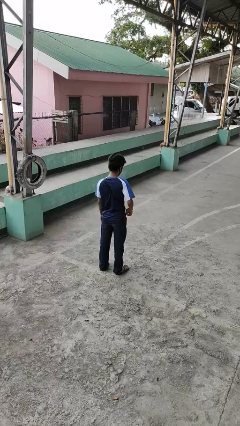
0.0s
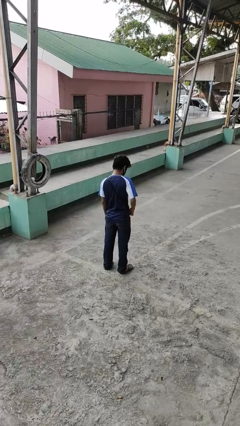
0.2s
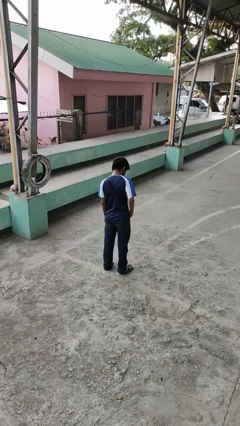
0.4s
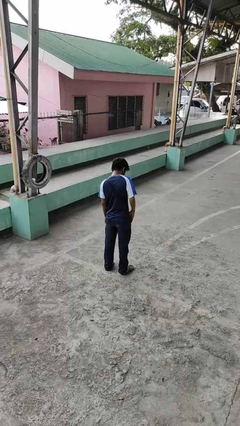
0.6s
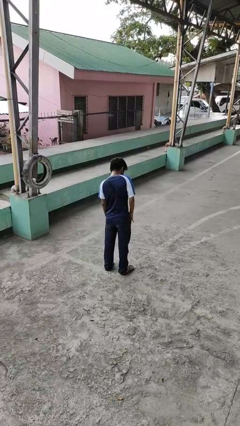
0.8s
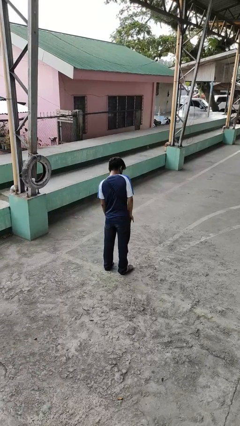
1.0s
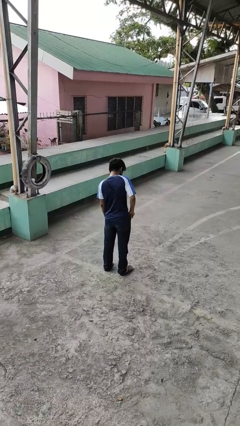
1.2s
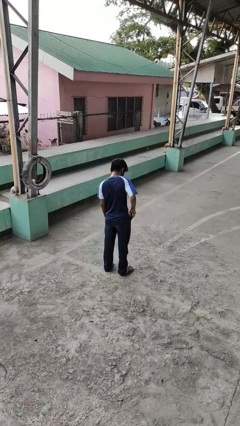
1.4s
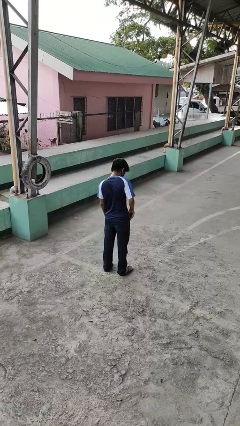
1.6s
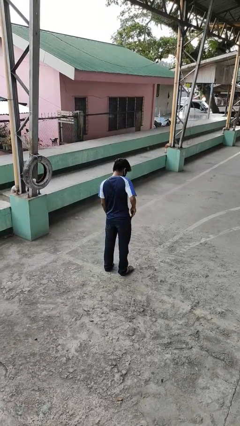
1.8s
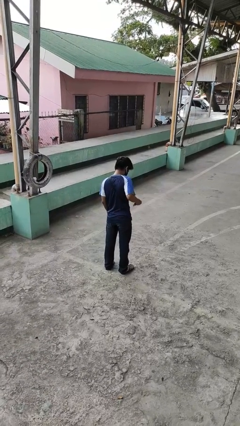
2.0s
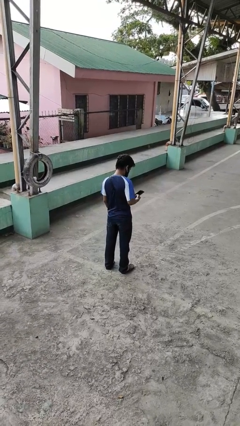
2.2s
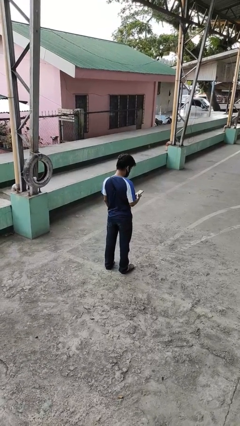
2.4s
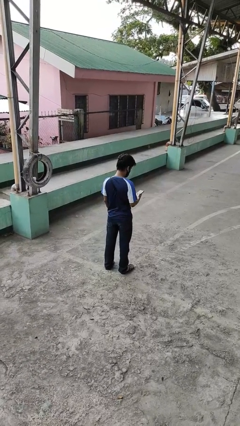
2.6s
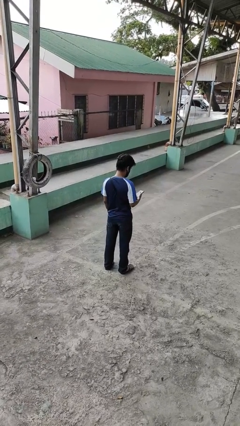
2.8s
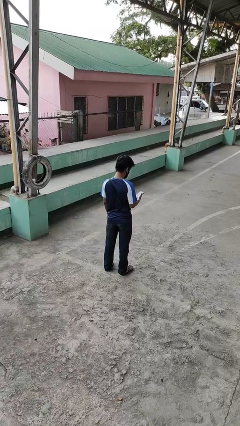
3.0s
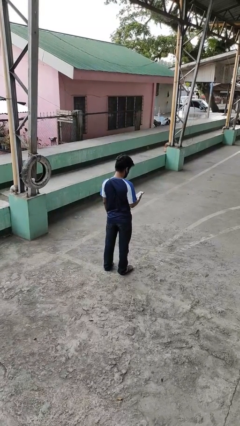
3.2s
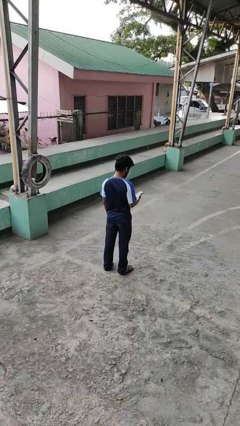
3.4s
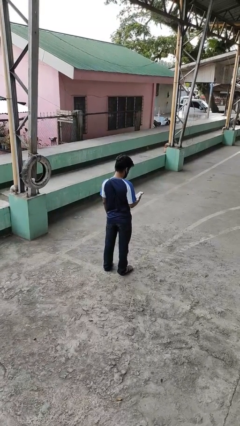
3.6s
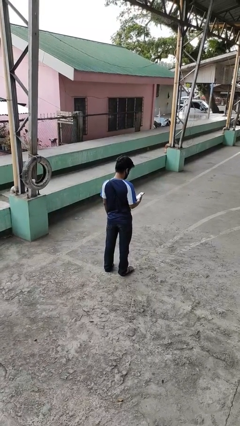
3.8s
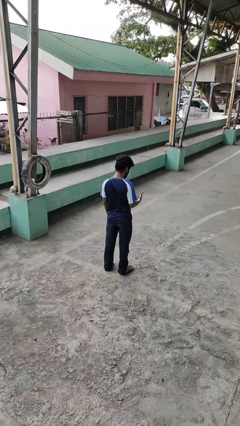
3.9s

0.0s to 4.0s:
person takes phone from pocket

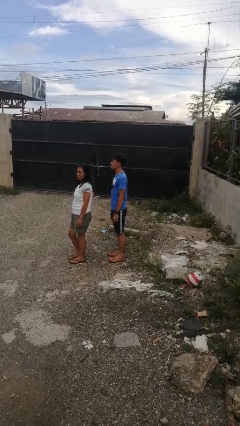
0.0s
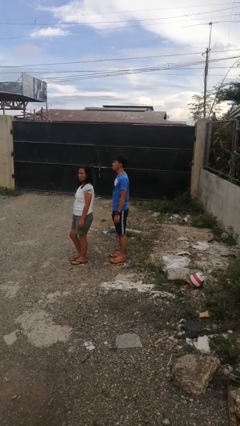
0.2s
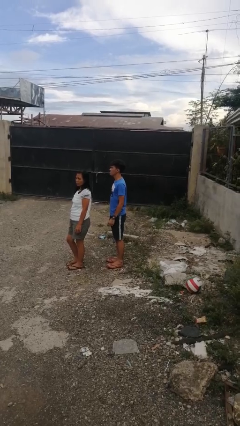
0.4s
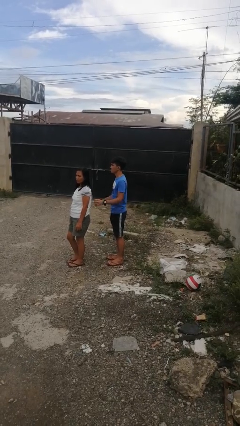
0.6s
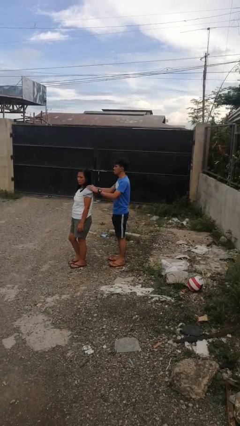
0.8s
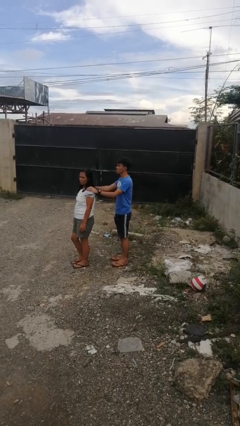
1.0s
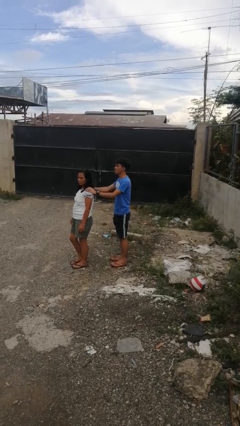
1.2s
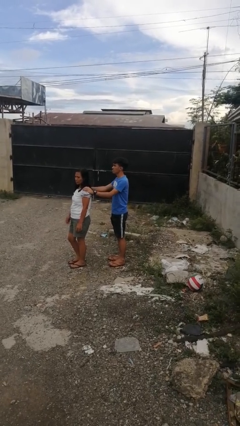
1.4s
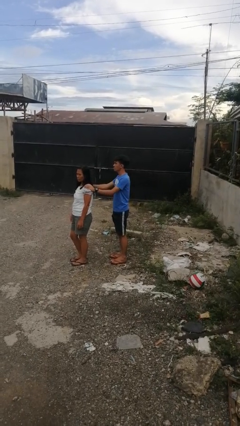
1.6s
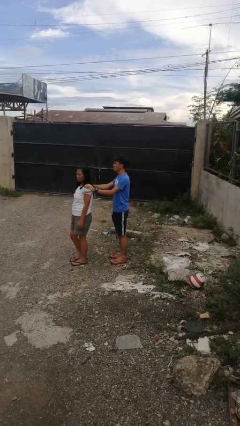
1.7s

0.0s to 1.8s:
person grabs person by shoulder

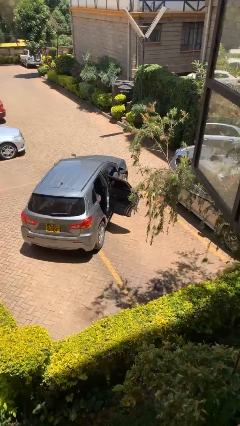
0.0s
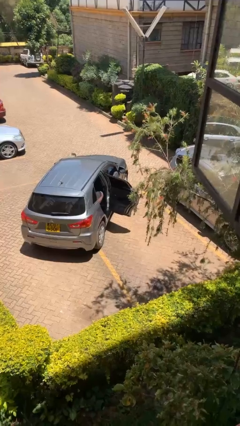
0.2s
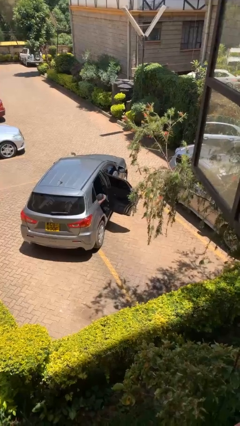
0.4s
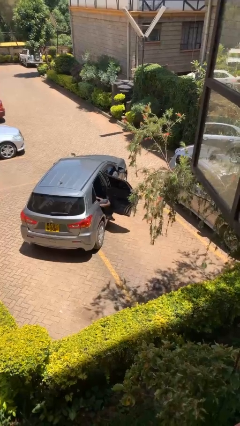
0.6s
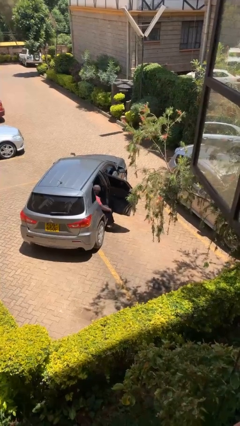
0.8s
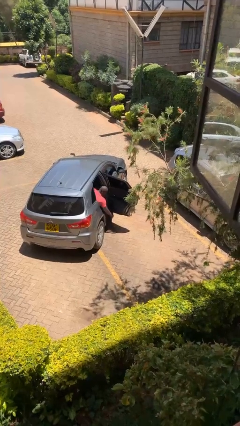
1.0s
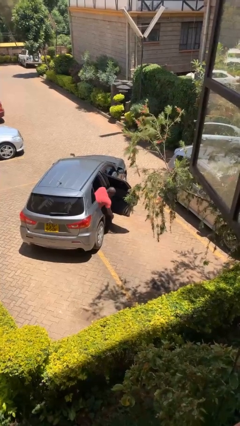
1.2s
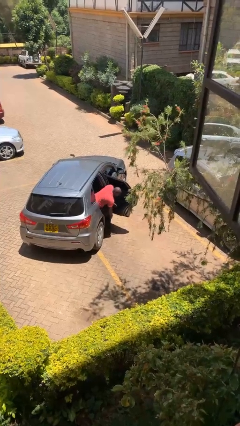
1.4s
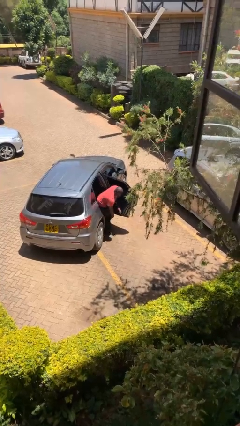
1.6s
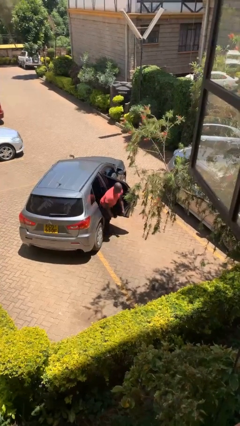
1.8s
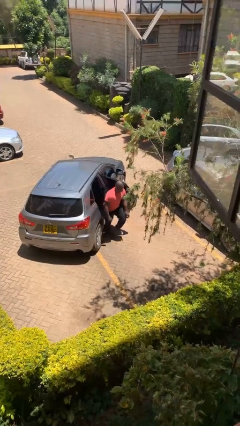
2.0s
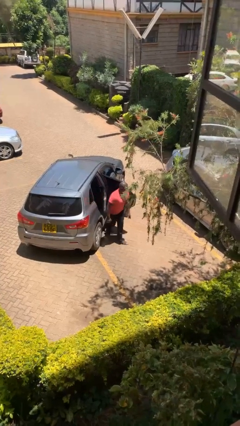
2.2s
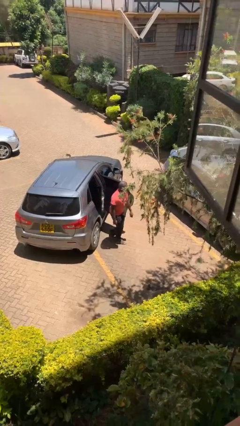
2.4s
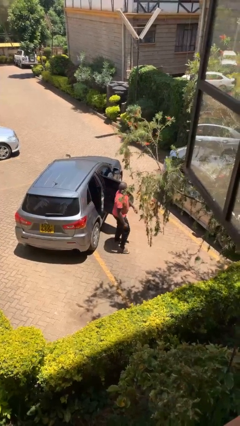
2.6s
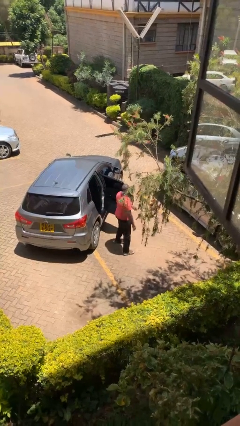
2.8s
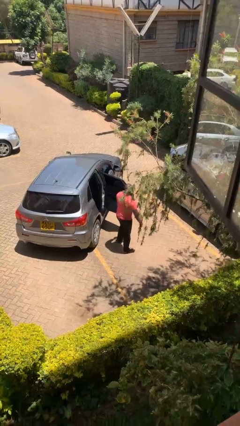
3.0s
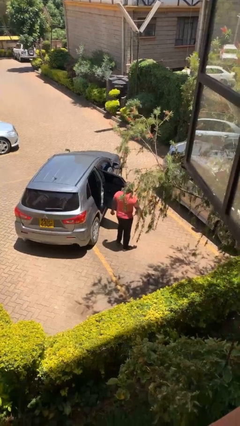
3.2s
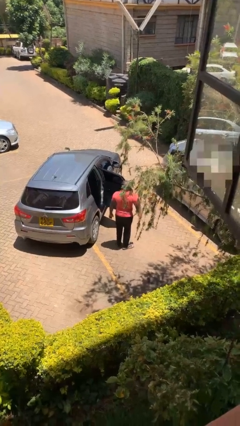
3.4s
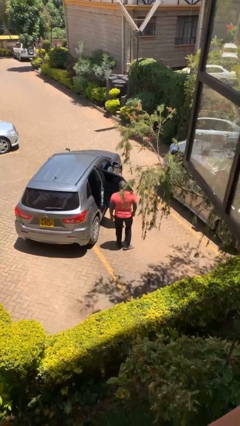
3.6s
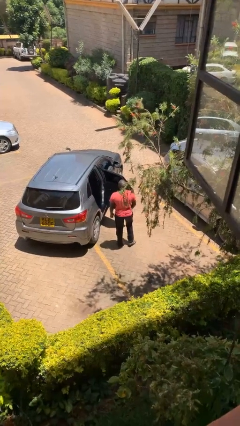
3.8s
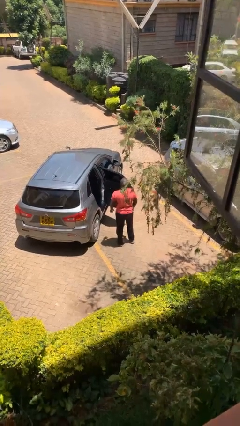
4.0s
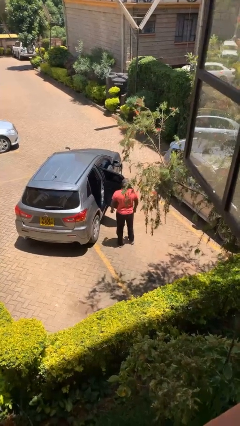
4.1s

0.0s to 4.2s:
person exits car

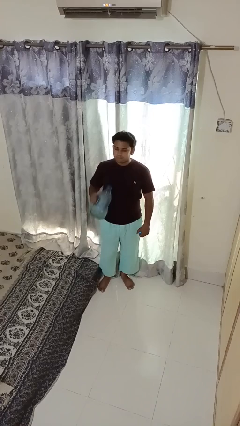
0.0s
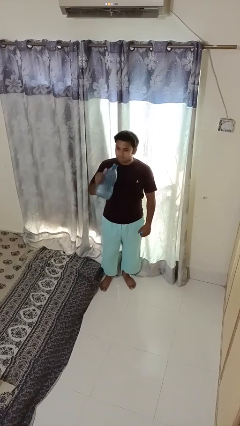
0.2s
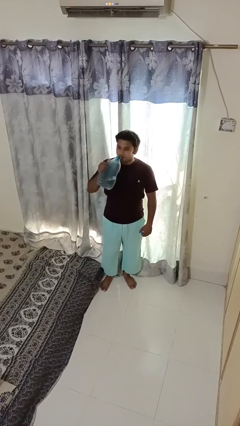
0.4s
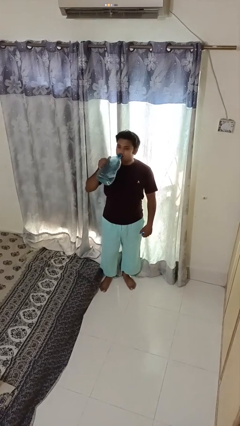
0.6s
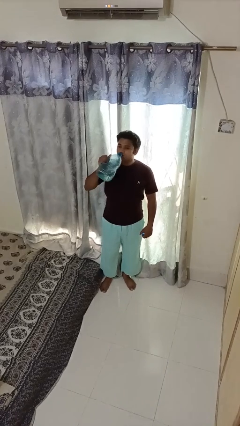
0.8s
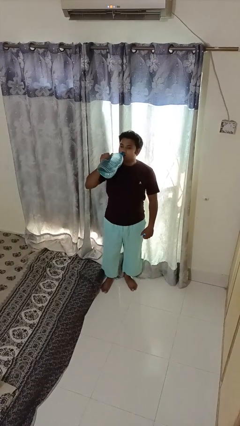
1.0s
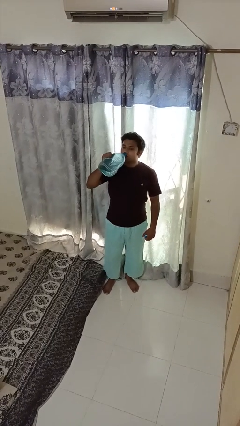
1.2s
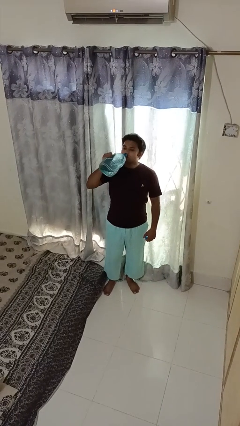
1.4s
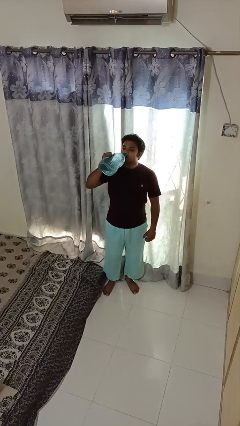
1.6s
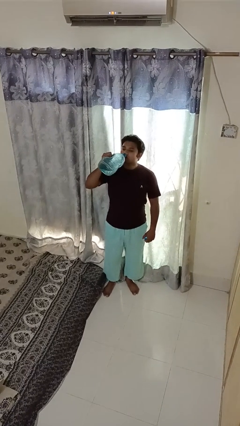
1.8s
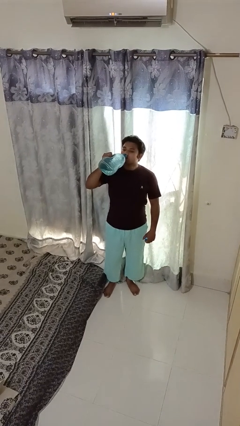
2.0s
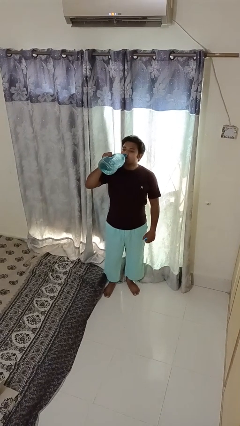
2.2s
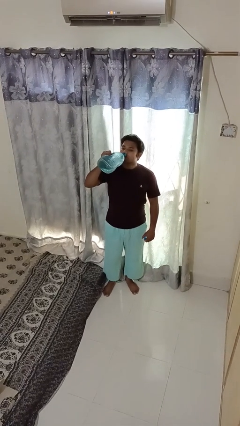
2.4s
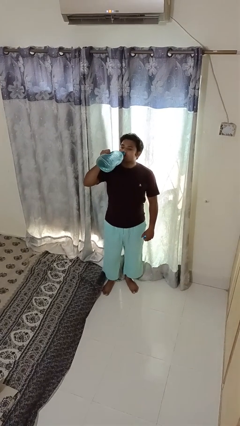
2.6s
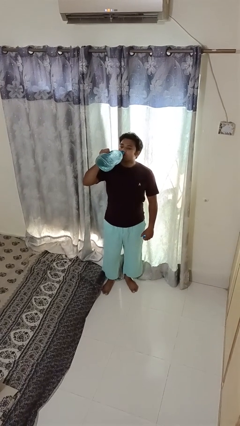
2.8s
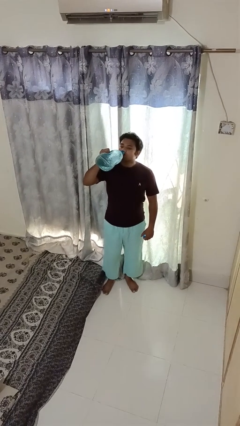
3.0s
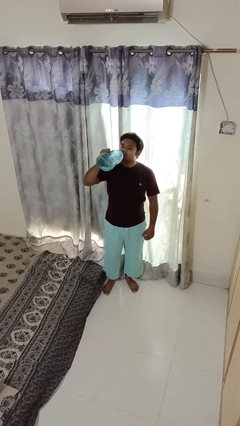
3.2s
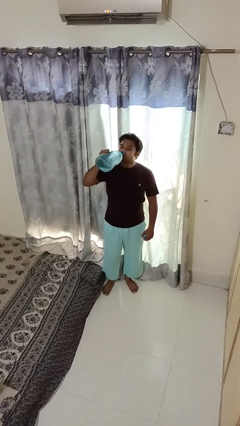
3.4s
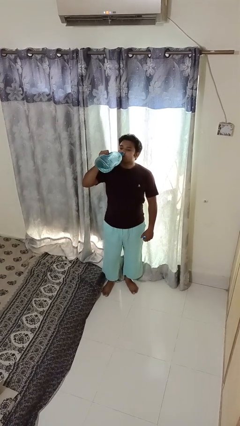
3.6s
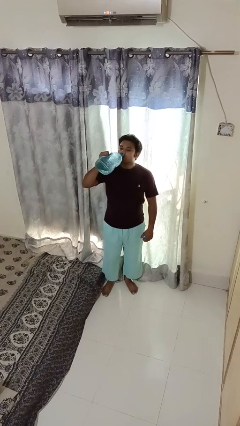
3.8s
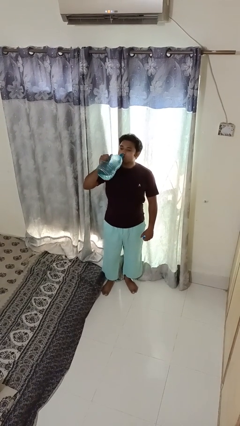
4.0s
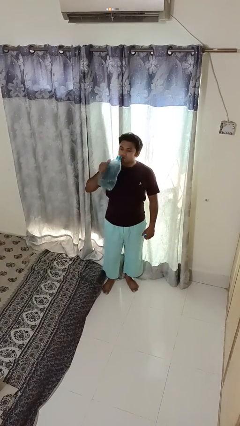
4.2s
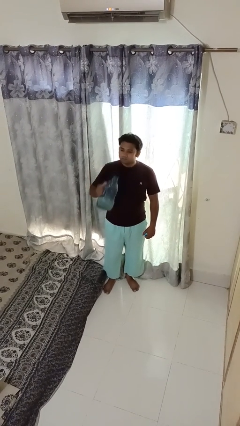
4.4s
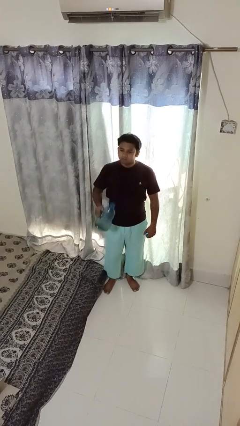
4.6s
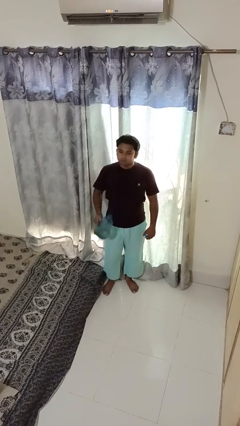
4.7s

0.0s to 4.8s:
person drinks from bottle

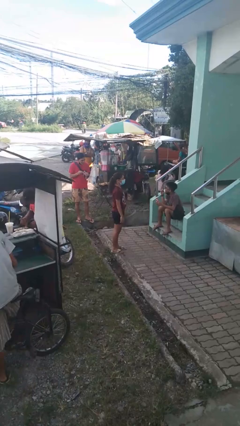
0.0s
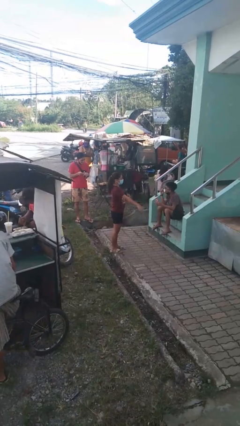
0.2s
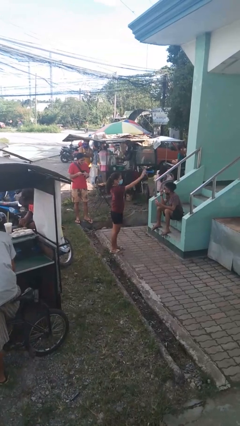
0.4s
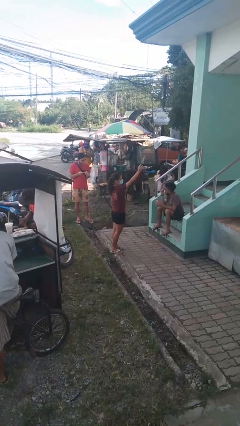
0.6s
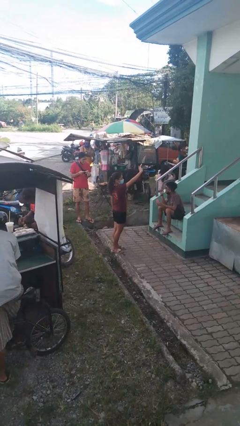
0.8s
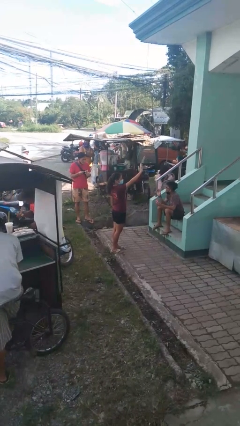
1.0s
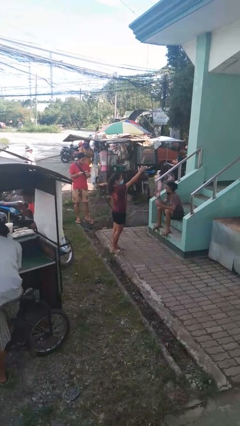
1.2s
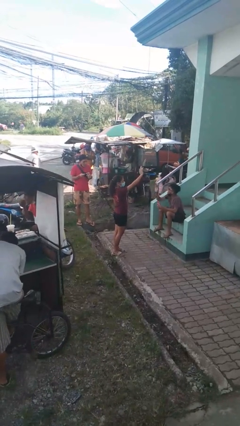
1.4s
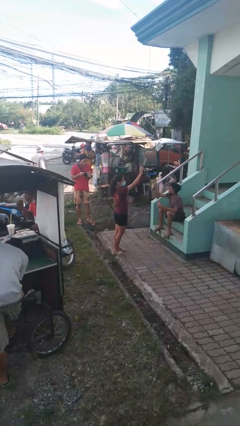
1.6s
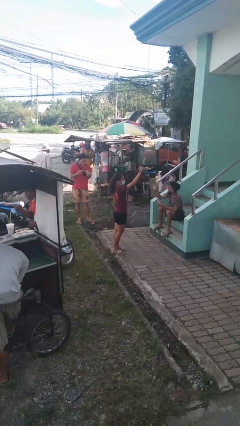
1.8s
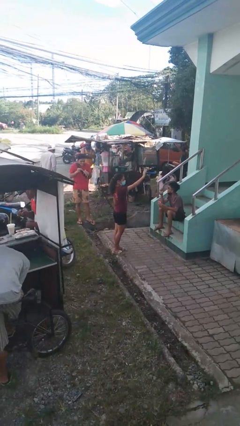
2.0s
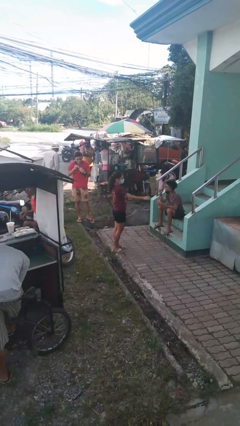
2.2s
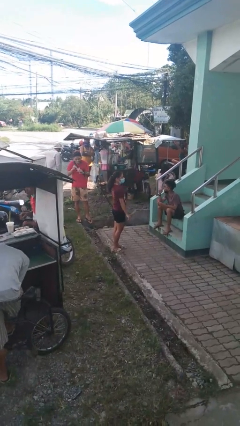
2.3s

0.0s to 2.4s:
person waves at person

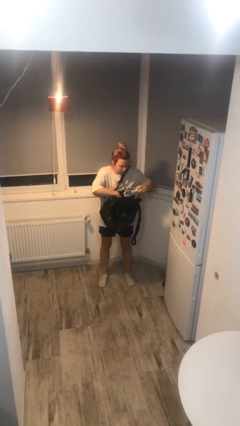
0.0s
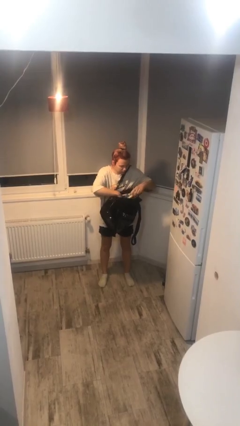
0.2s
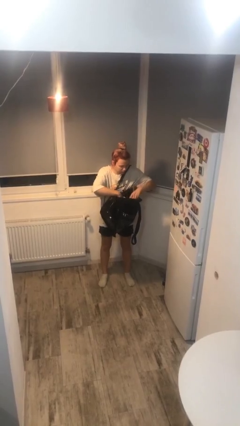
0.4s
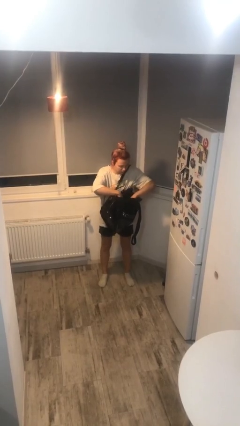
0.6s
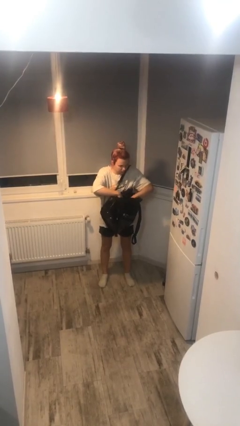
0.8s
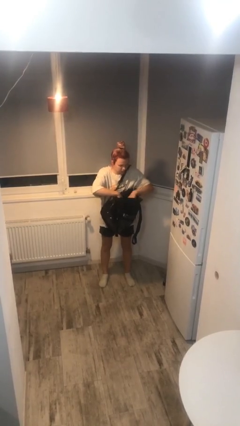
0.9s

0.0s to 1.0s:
person puts object into backpack
